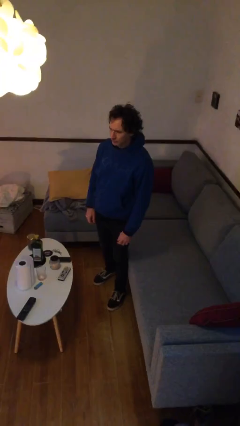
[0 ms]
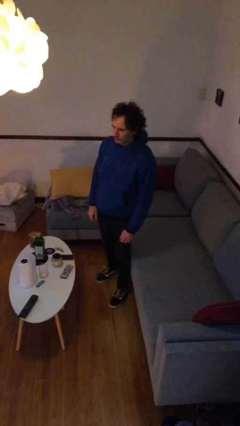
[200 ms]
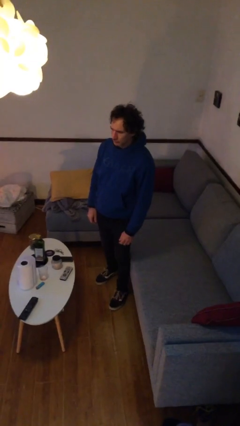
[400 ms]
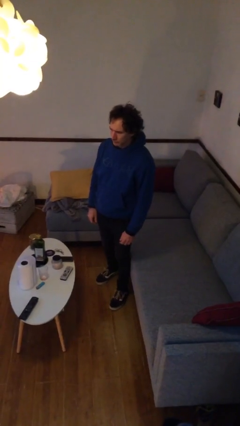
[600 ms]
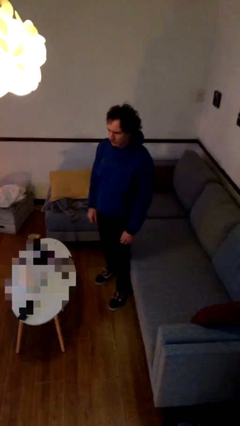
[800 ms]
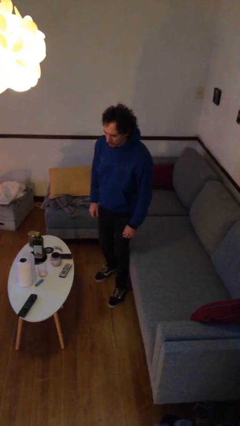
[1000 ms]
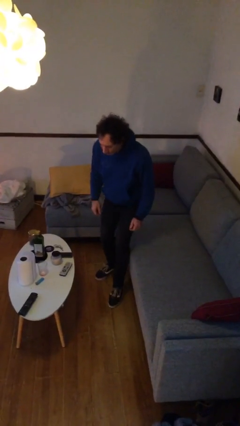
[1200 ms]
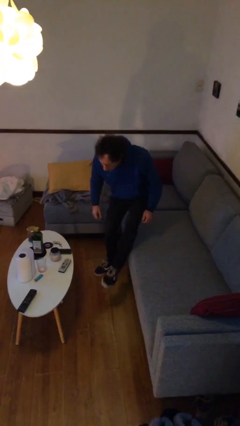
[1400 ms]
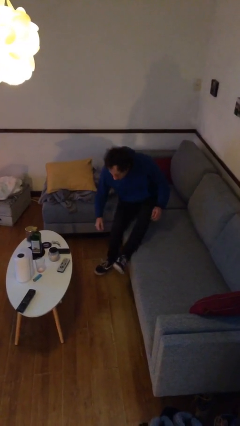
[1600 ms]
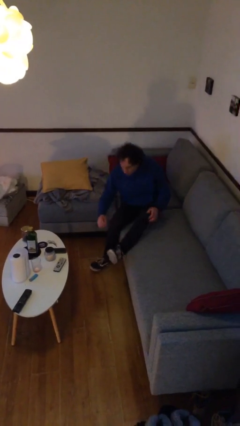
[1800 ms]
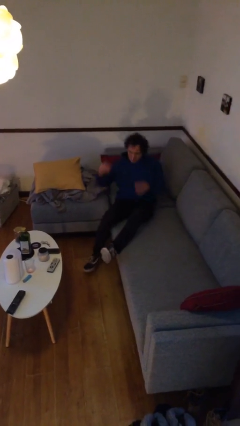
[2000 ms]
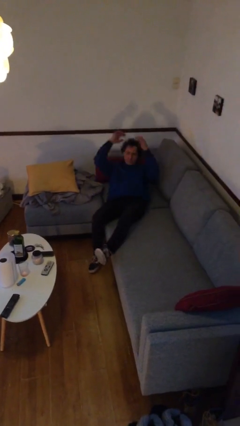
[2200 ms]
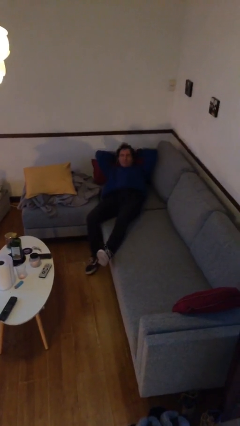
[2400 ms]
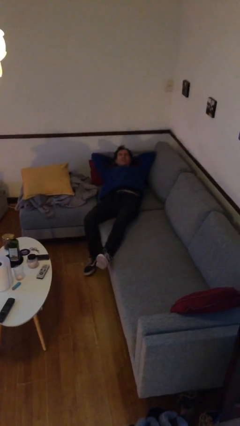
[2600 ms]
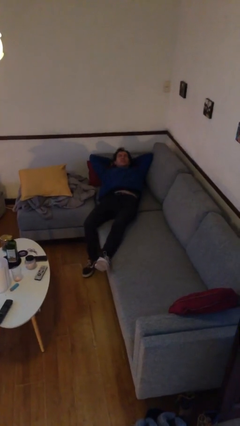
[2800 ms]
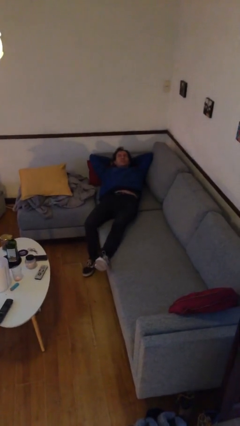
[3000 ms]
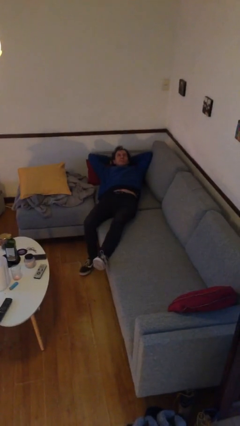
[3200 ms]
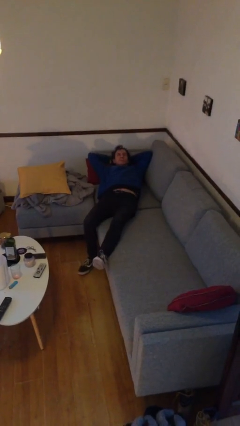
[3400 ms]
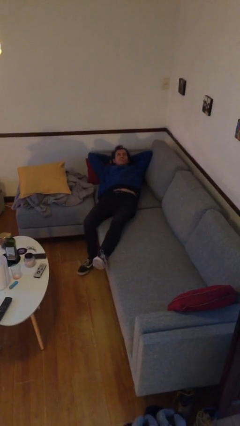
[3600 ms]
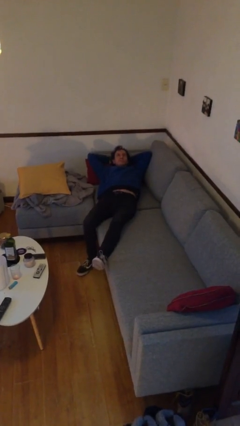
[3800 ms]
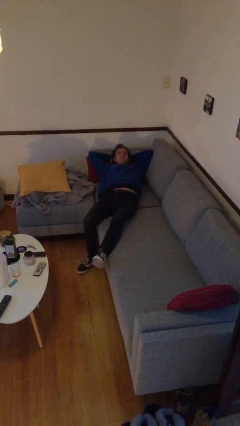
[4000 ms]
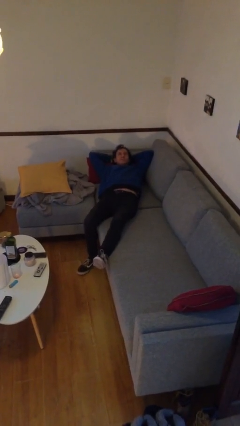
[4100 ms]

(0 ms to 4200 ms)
person lies down on couch

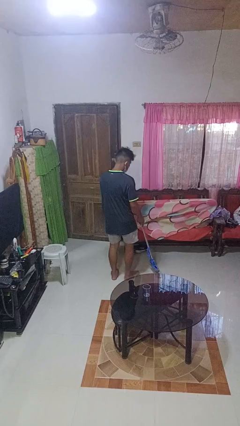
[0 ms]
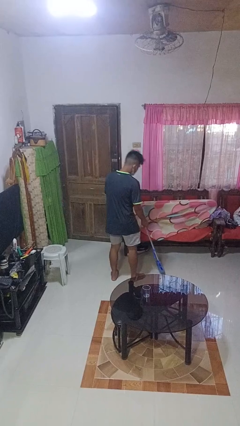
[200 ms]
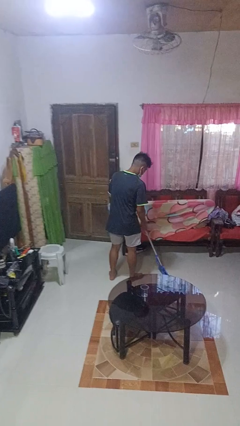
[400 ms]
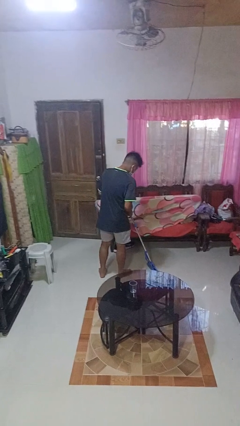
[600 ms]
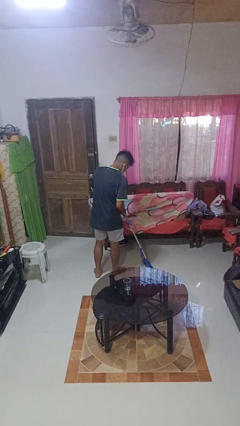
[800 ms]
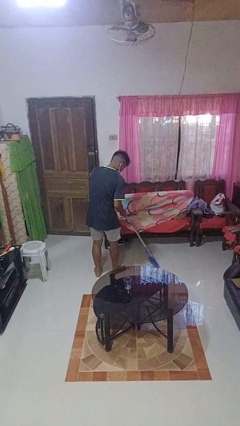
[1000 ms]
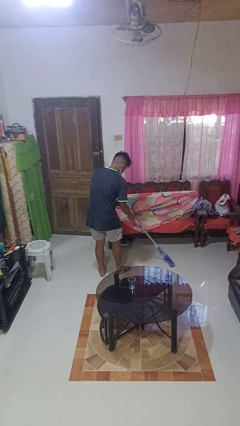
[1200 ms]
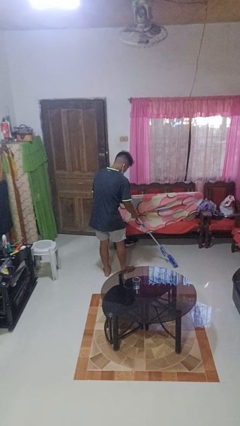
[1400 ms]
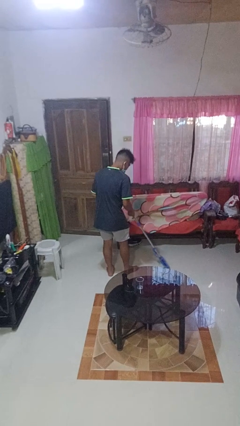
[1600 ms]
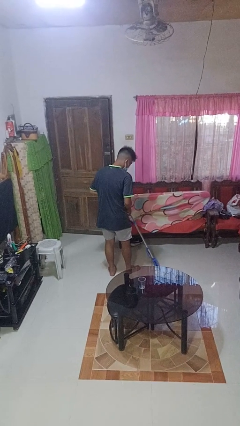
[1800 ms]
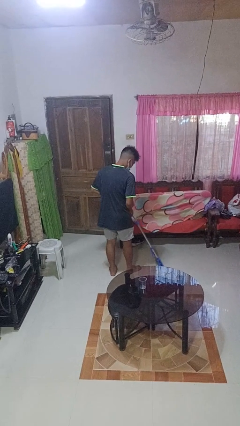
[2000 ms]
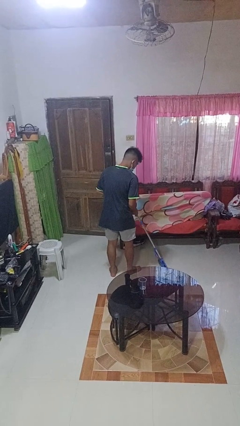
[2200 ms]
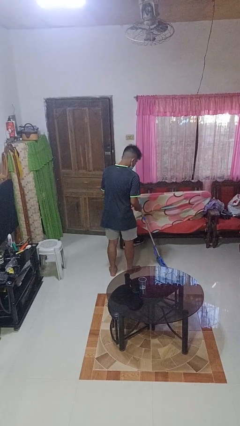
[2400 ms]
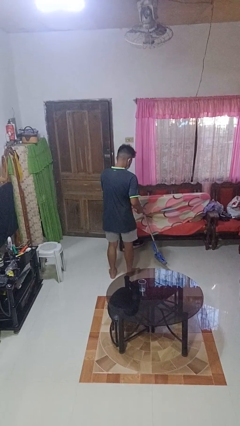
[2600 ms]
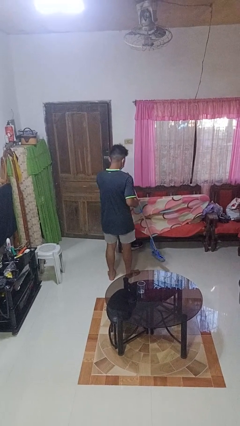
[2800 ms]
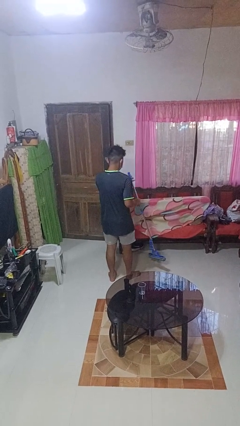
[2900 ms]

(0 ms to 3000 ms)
person mops

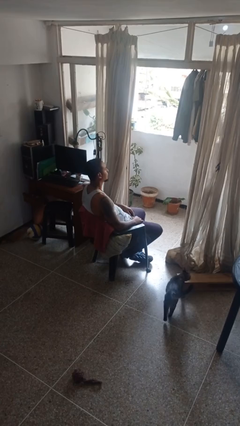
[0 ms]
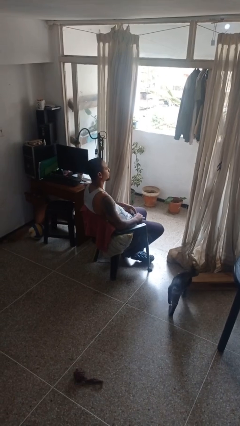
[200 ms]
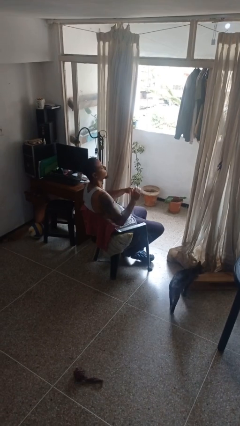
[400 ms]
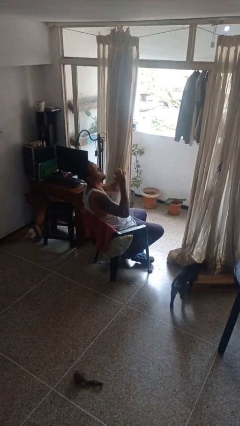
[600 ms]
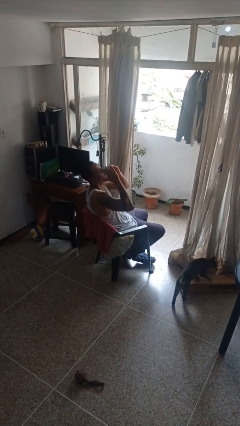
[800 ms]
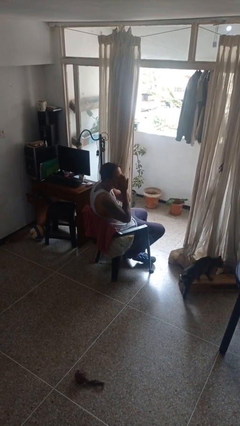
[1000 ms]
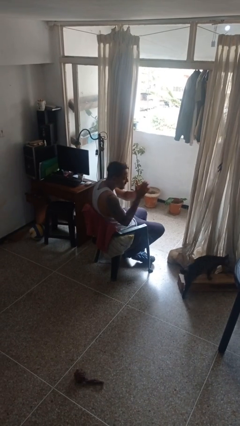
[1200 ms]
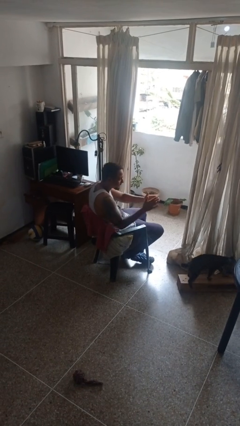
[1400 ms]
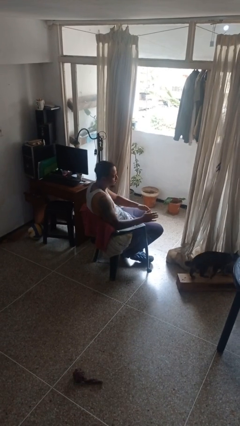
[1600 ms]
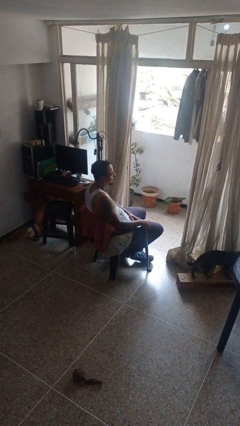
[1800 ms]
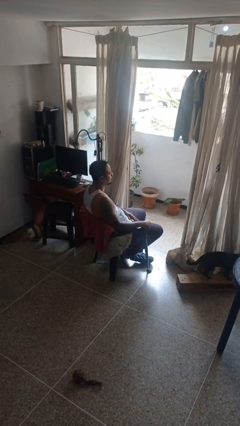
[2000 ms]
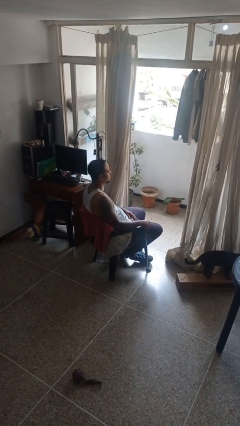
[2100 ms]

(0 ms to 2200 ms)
person sneezes into hand

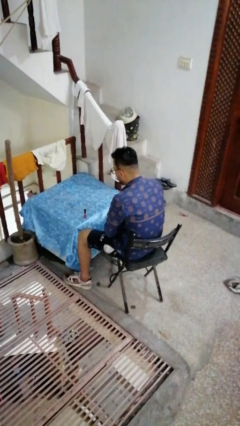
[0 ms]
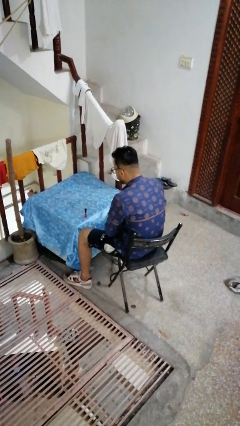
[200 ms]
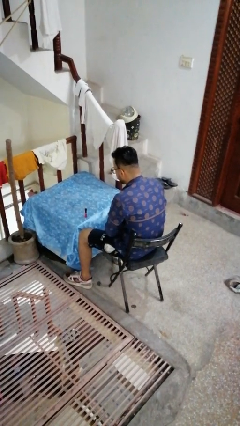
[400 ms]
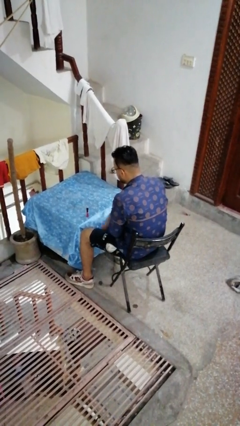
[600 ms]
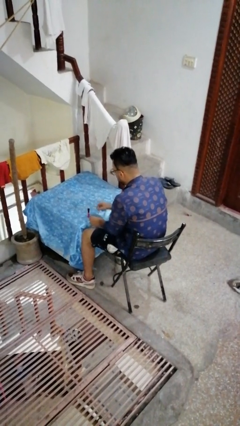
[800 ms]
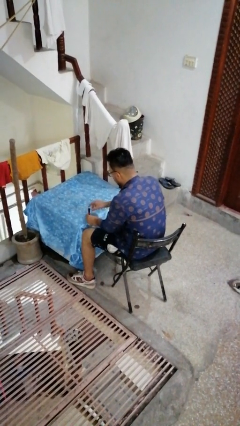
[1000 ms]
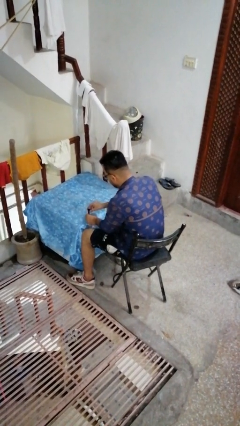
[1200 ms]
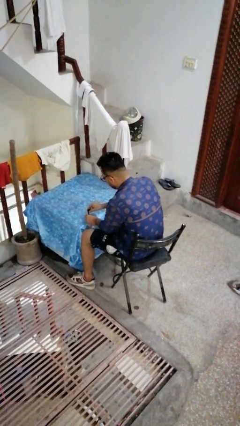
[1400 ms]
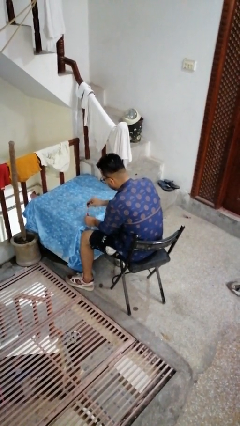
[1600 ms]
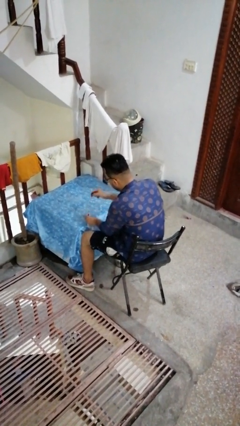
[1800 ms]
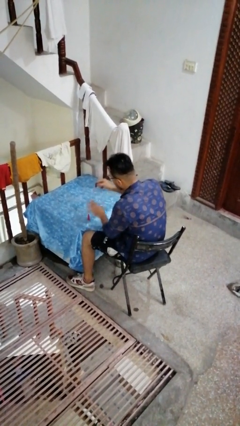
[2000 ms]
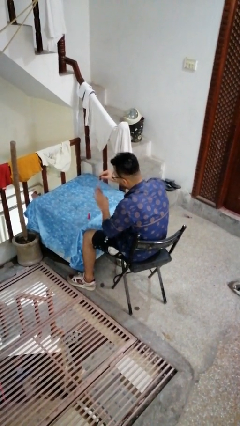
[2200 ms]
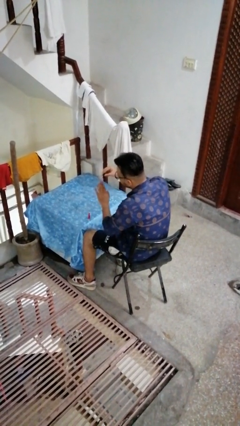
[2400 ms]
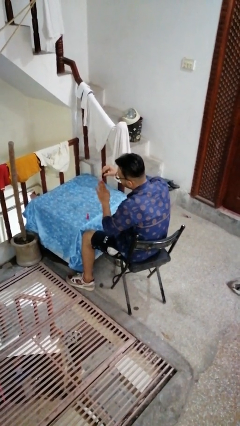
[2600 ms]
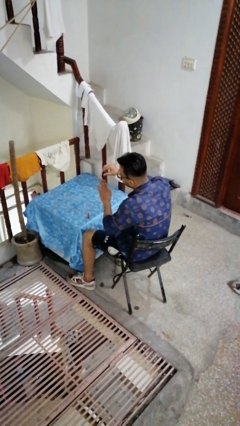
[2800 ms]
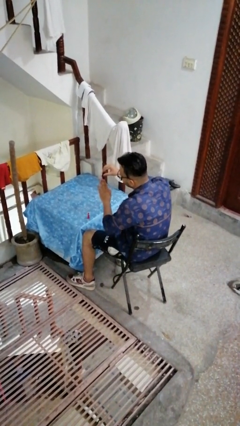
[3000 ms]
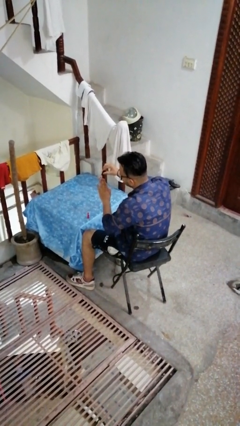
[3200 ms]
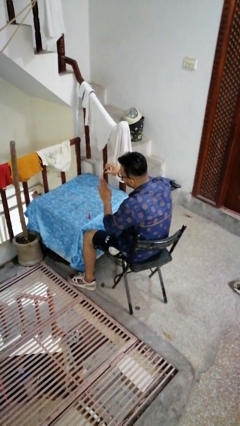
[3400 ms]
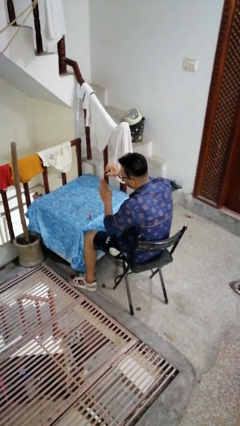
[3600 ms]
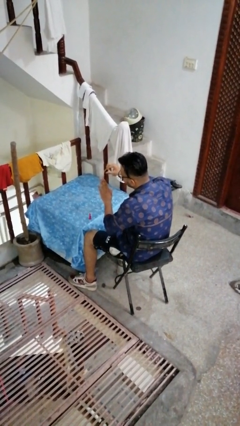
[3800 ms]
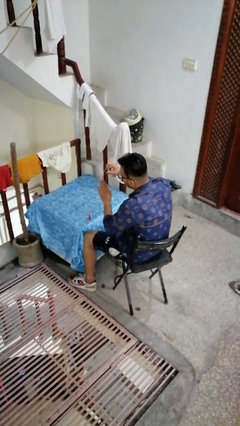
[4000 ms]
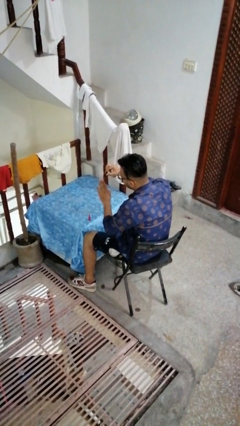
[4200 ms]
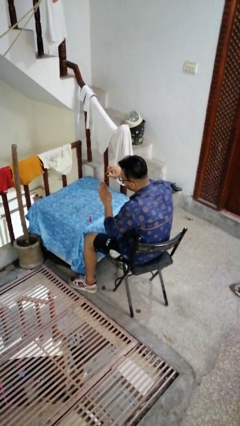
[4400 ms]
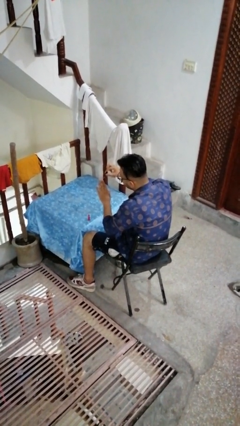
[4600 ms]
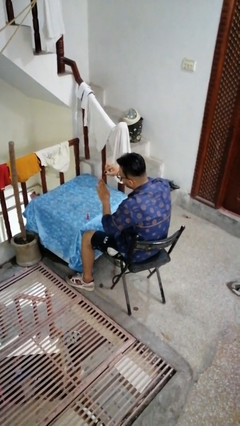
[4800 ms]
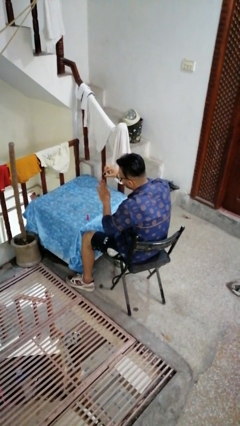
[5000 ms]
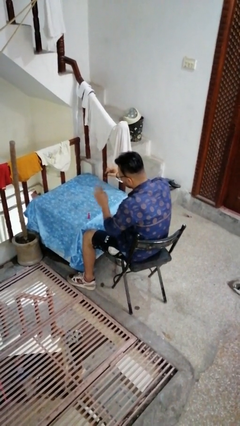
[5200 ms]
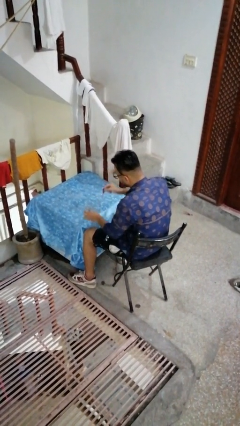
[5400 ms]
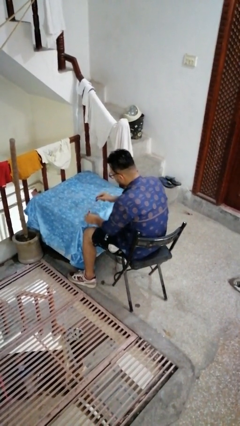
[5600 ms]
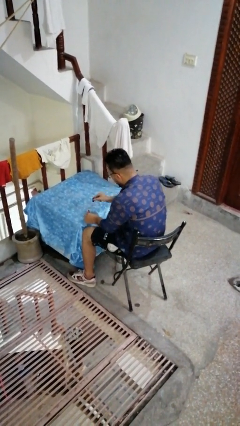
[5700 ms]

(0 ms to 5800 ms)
person paints fingernails

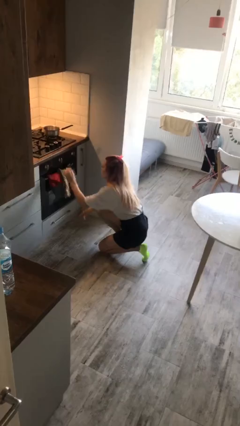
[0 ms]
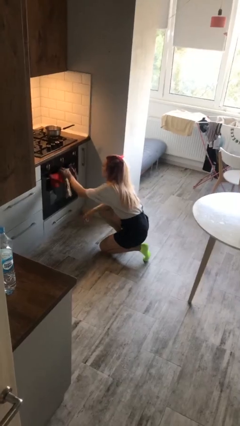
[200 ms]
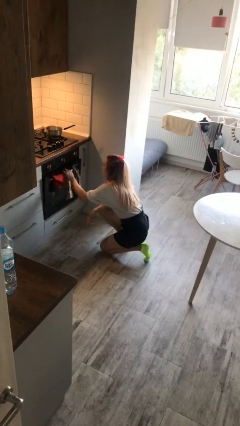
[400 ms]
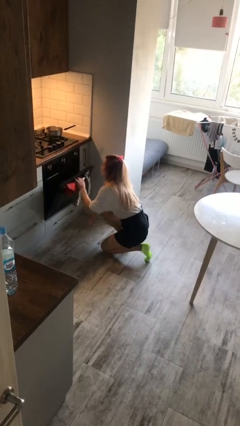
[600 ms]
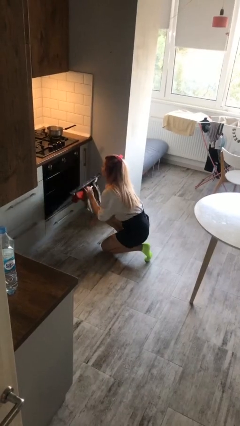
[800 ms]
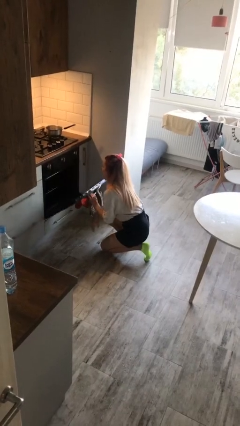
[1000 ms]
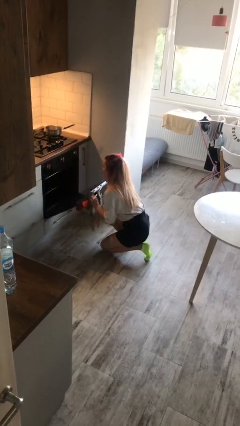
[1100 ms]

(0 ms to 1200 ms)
person opens oven door

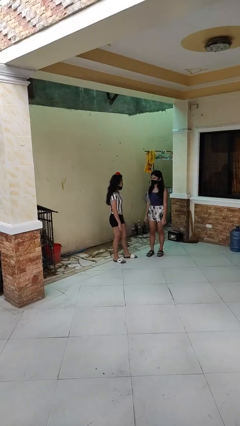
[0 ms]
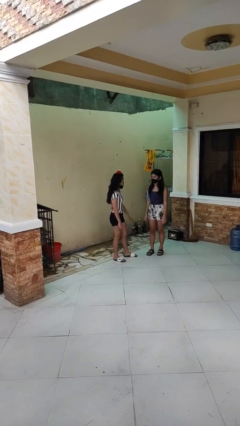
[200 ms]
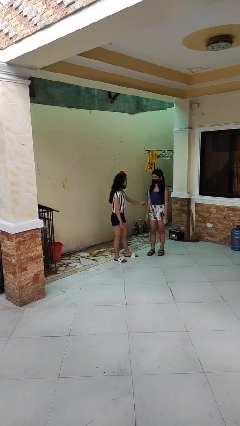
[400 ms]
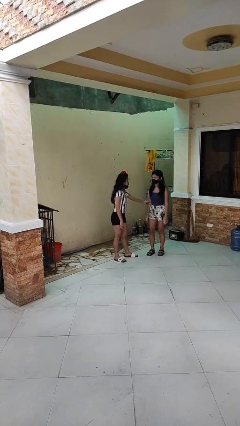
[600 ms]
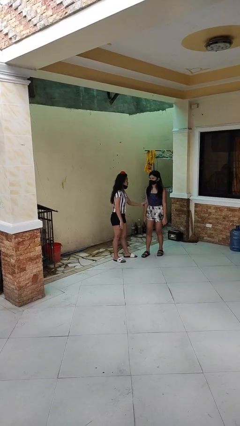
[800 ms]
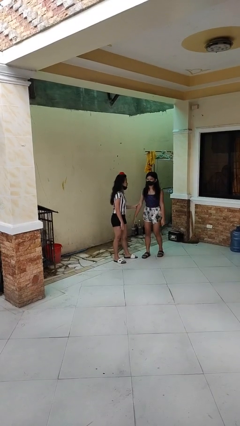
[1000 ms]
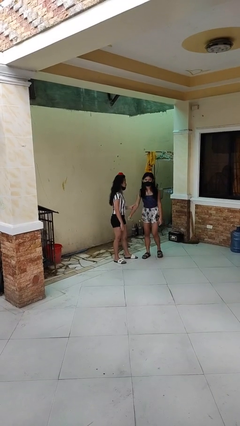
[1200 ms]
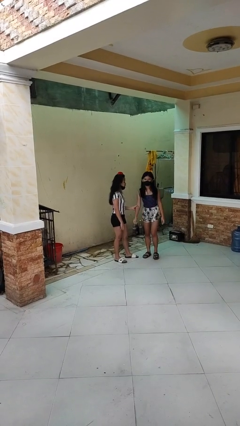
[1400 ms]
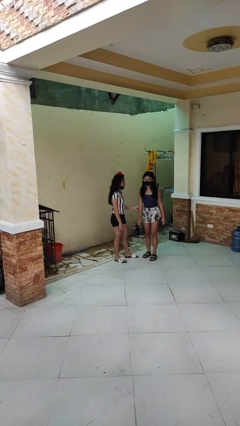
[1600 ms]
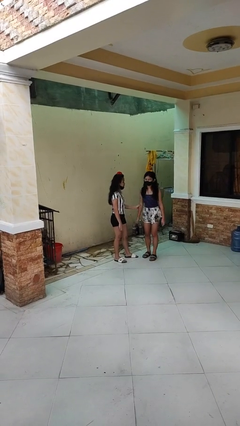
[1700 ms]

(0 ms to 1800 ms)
person grabs person by forearm
